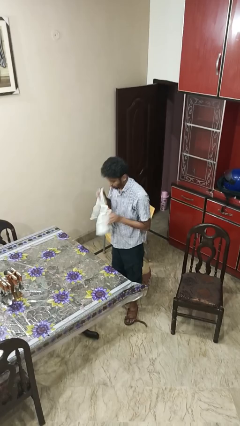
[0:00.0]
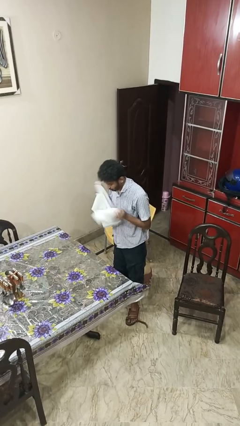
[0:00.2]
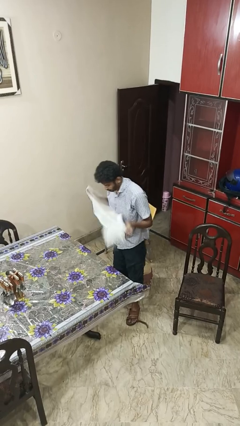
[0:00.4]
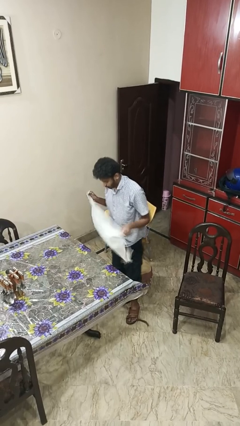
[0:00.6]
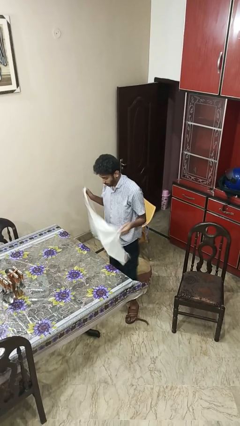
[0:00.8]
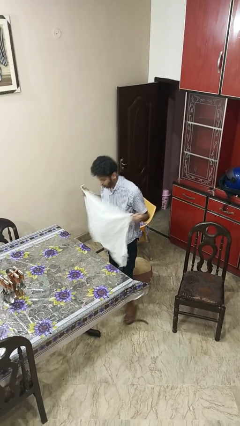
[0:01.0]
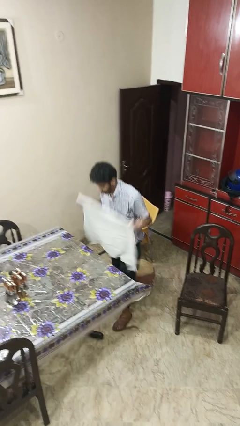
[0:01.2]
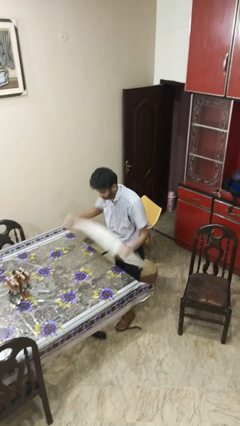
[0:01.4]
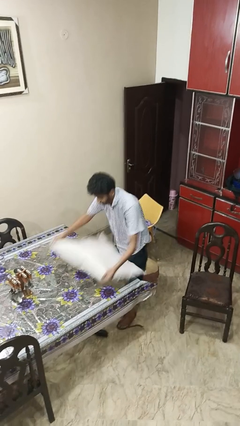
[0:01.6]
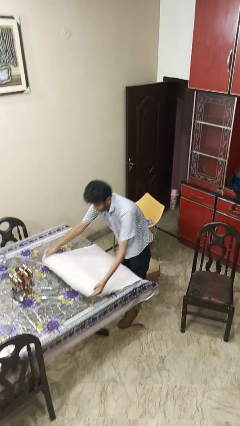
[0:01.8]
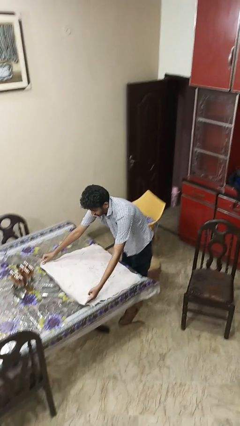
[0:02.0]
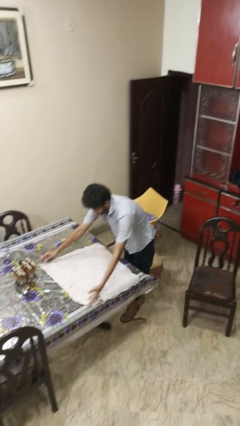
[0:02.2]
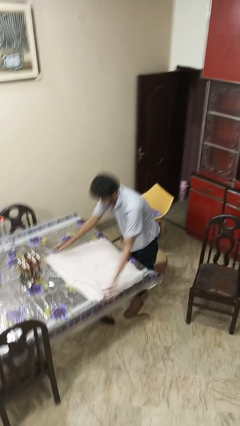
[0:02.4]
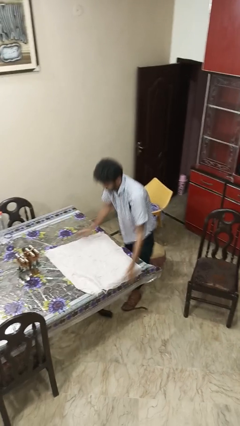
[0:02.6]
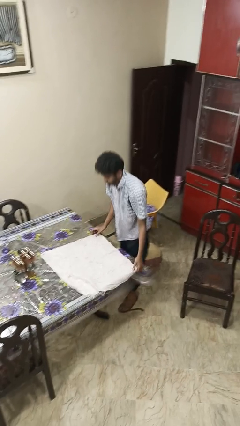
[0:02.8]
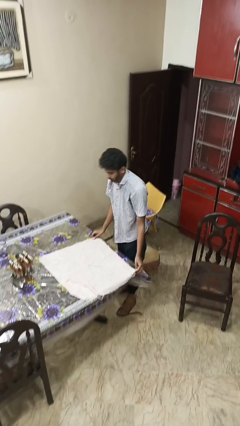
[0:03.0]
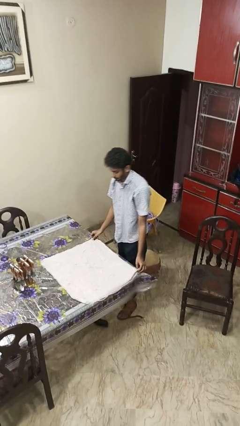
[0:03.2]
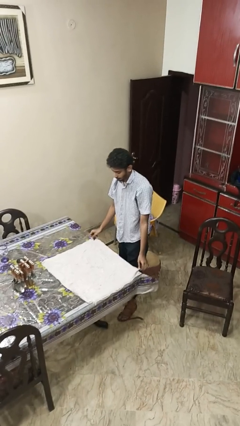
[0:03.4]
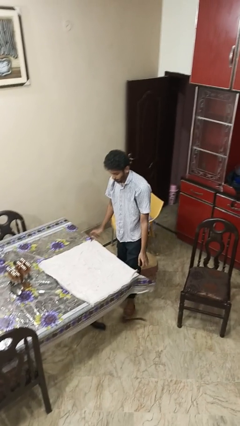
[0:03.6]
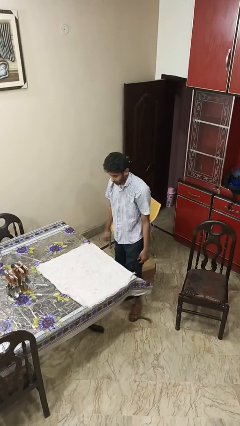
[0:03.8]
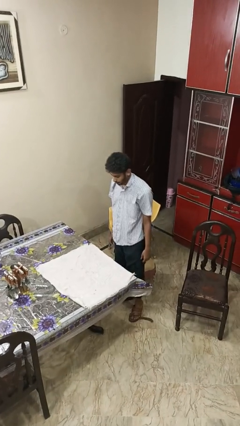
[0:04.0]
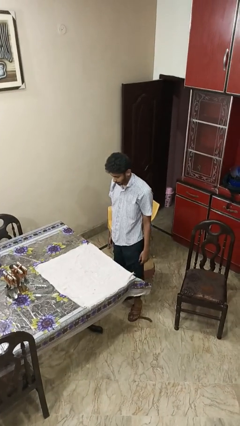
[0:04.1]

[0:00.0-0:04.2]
person spreads tablecloth

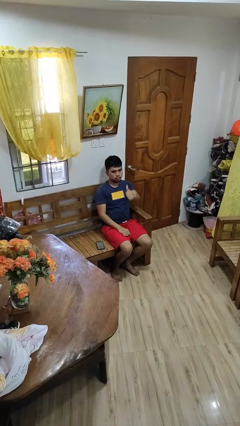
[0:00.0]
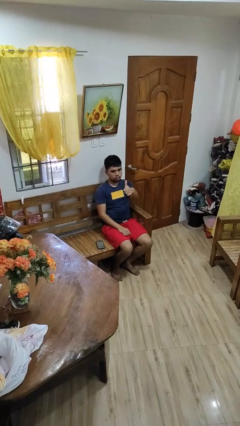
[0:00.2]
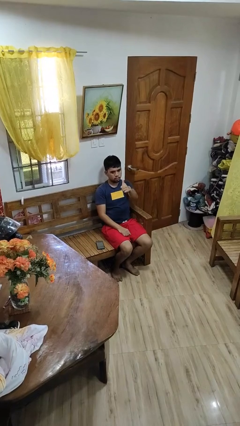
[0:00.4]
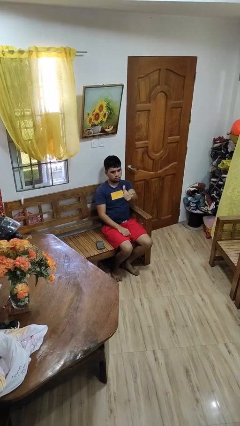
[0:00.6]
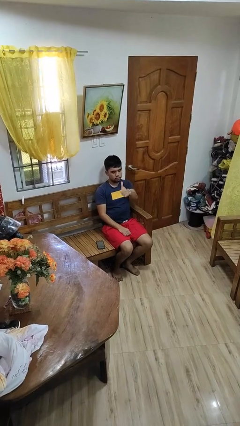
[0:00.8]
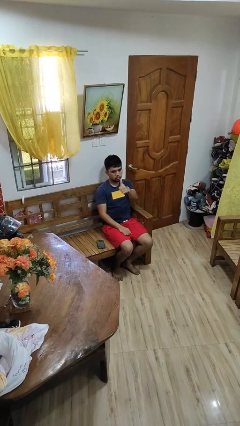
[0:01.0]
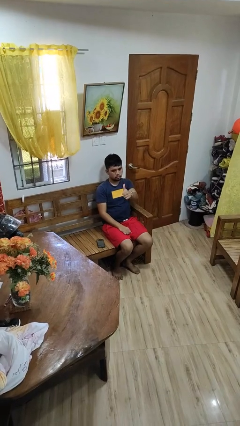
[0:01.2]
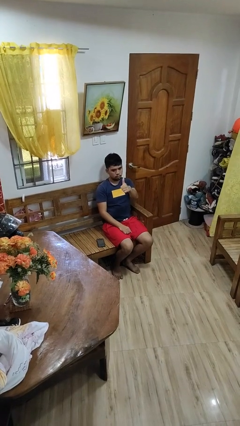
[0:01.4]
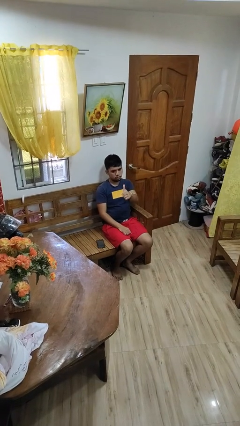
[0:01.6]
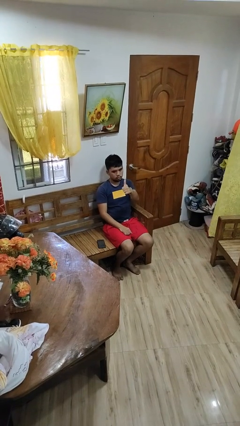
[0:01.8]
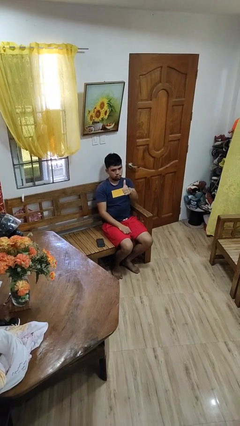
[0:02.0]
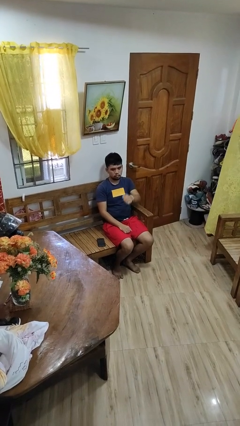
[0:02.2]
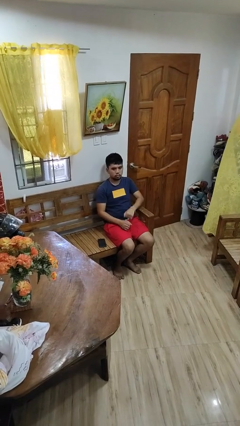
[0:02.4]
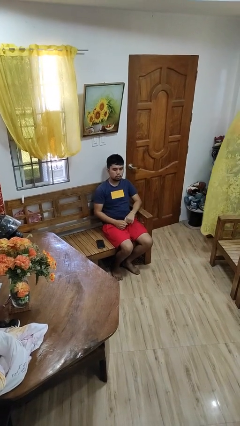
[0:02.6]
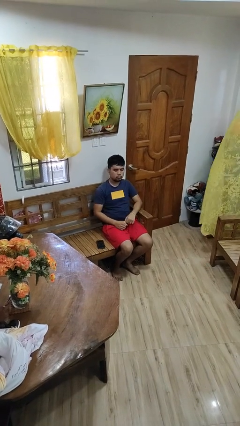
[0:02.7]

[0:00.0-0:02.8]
person gestures thumbs up

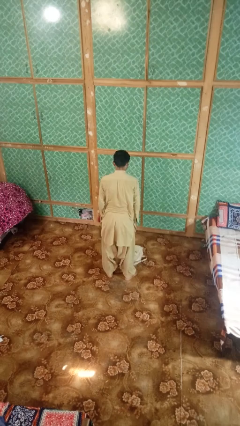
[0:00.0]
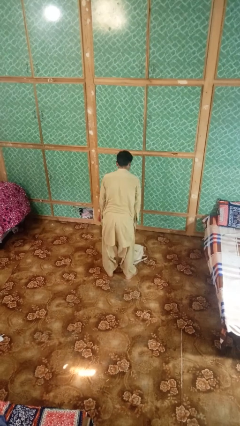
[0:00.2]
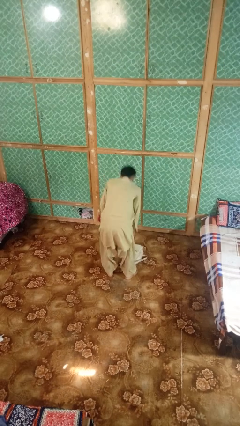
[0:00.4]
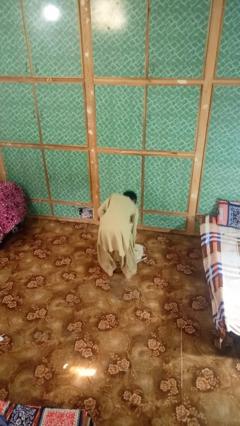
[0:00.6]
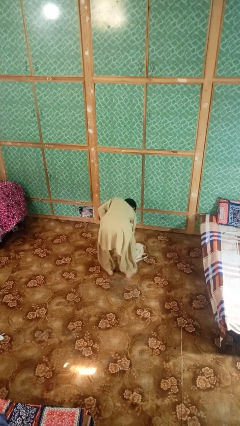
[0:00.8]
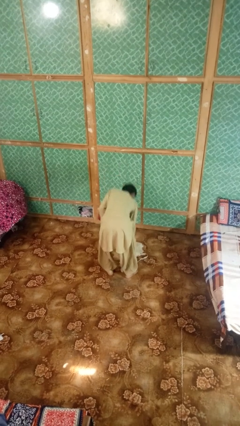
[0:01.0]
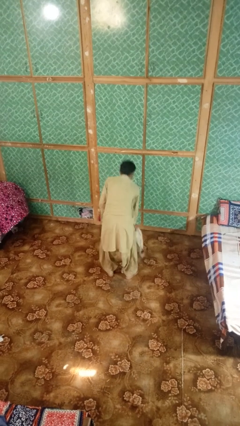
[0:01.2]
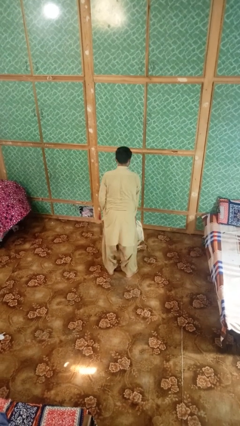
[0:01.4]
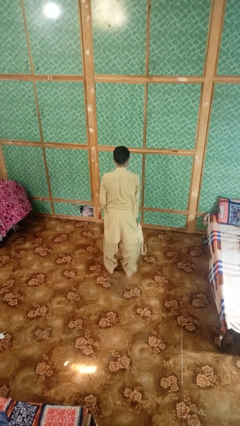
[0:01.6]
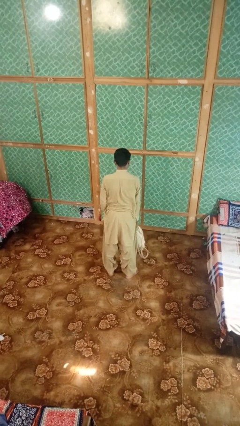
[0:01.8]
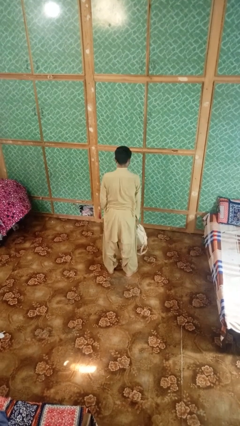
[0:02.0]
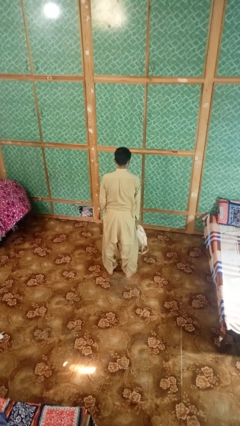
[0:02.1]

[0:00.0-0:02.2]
person picks up object from floor

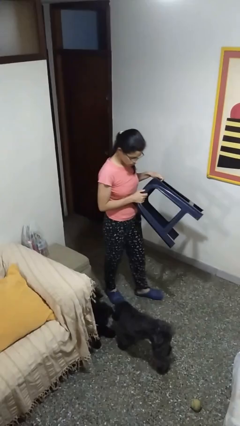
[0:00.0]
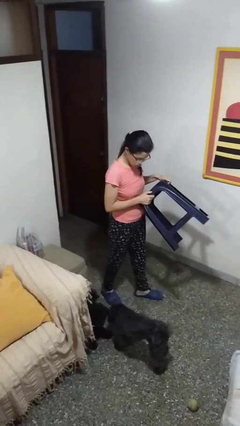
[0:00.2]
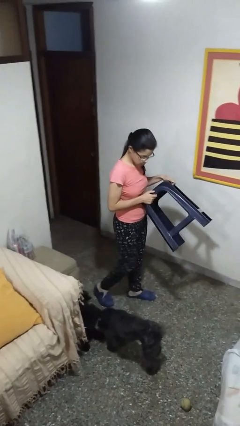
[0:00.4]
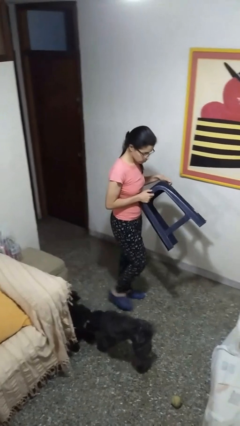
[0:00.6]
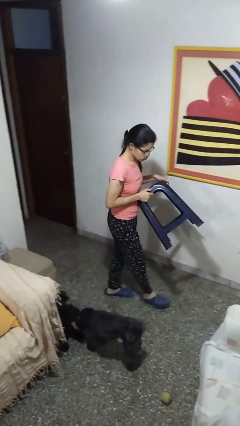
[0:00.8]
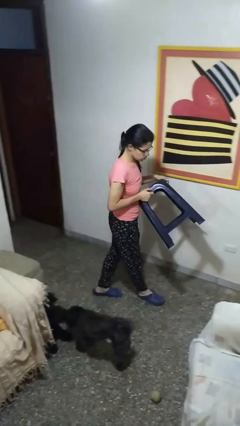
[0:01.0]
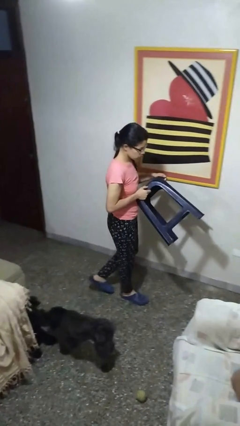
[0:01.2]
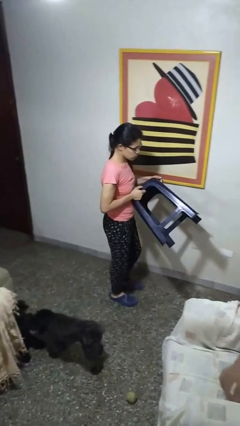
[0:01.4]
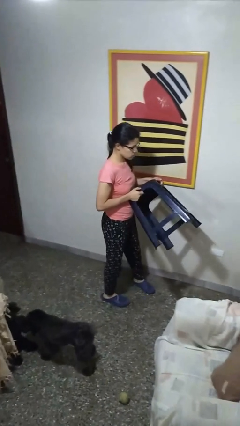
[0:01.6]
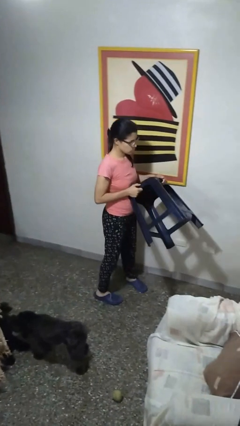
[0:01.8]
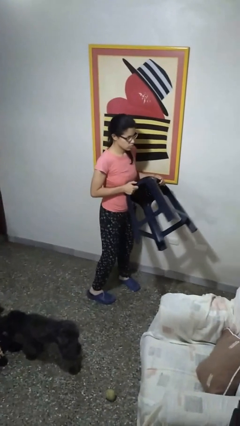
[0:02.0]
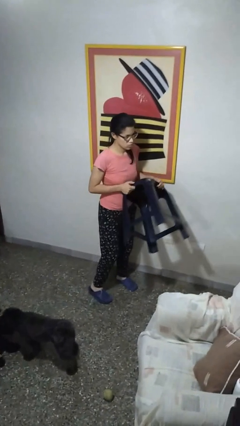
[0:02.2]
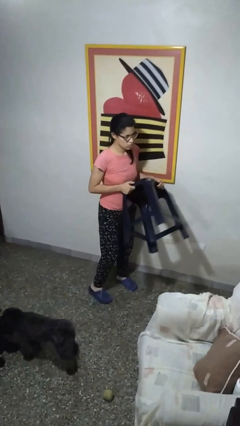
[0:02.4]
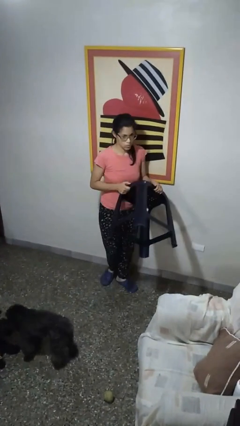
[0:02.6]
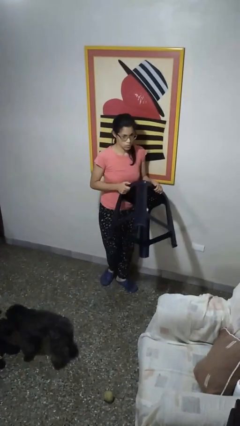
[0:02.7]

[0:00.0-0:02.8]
person carries furniture

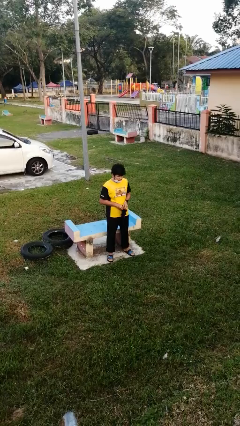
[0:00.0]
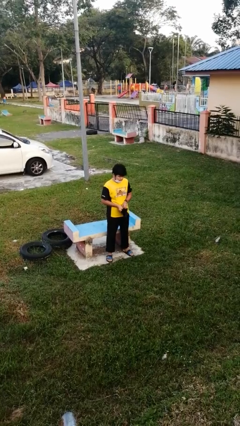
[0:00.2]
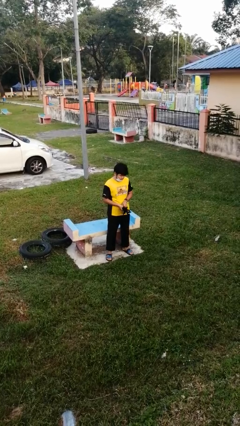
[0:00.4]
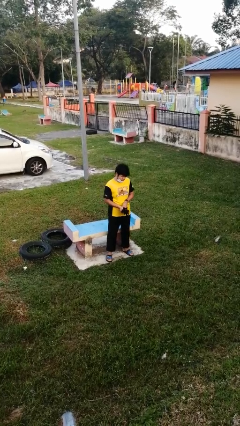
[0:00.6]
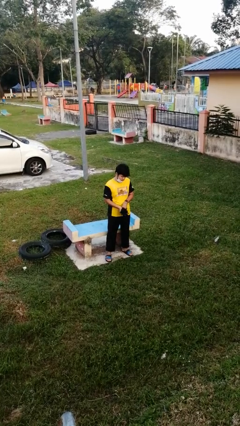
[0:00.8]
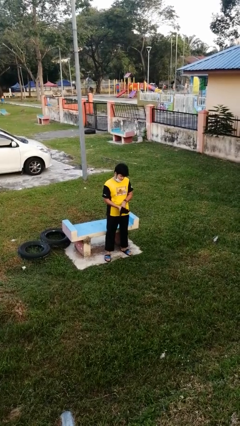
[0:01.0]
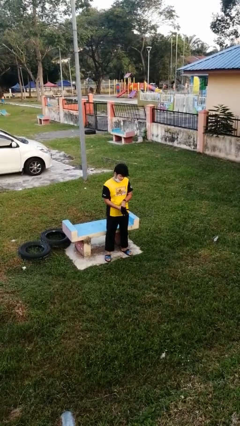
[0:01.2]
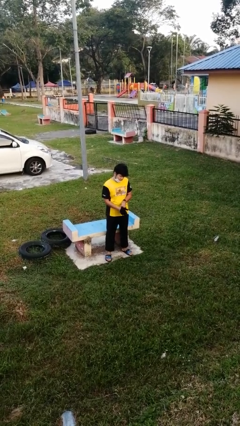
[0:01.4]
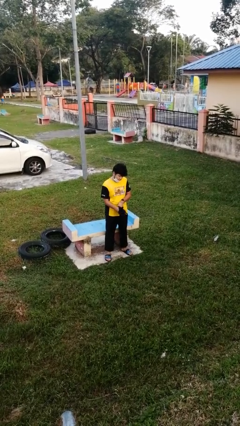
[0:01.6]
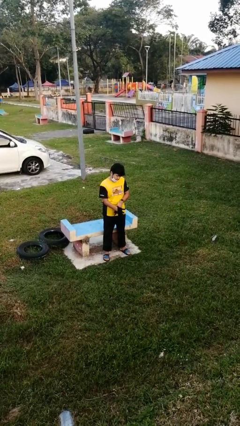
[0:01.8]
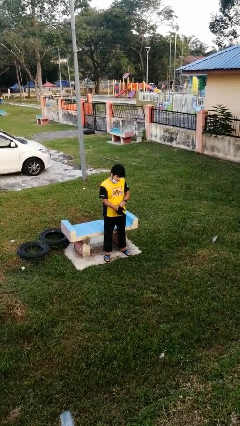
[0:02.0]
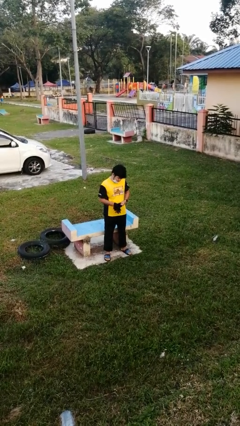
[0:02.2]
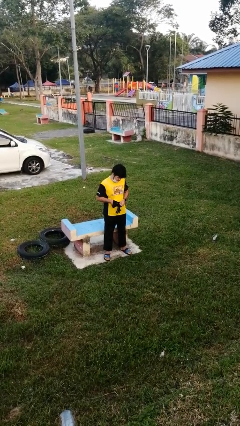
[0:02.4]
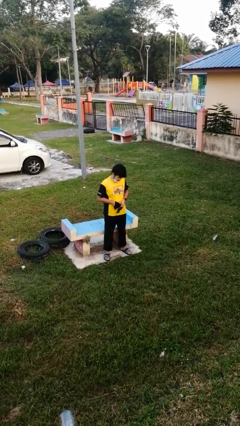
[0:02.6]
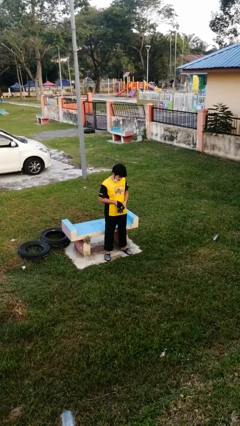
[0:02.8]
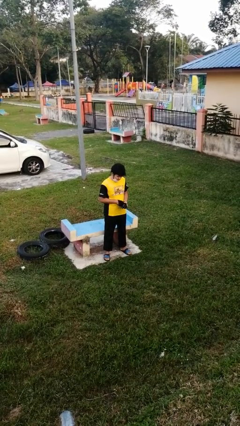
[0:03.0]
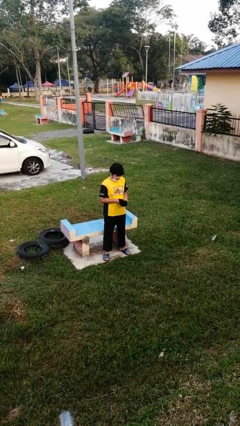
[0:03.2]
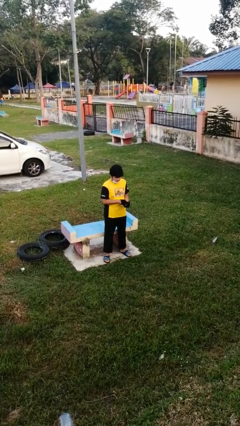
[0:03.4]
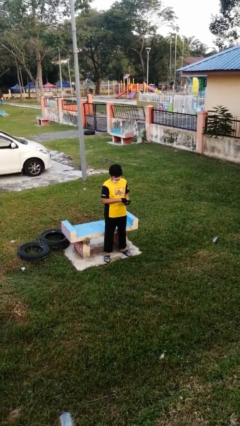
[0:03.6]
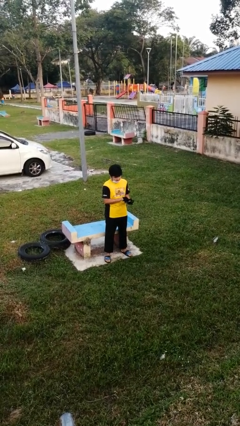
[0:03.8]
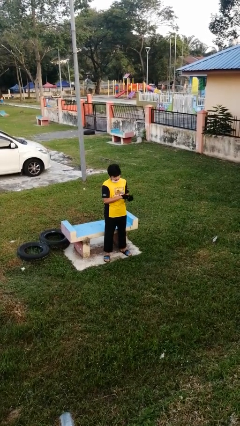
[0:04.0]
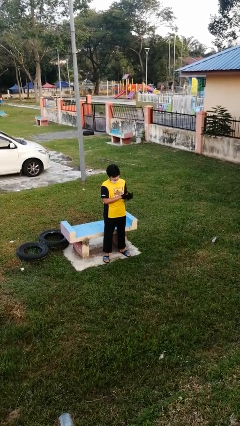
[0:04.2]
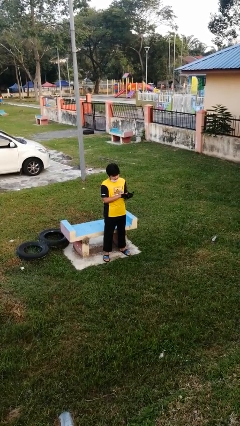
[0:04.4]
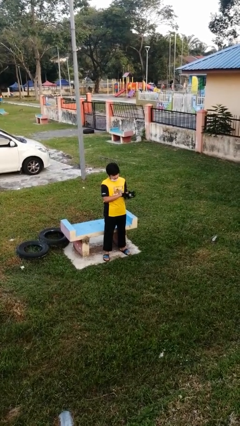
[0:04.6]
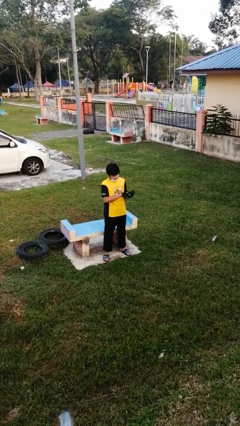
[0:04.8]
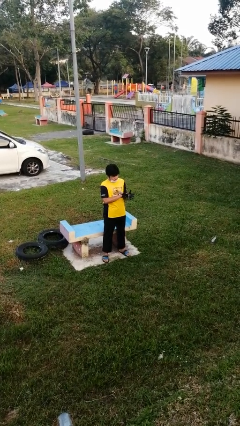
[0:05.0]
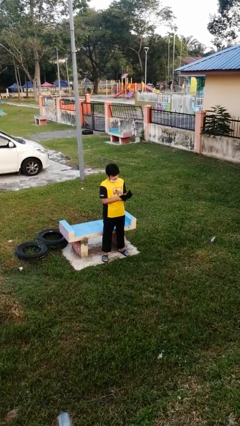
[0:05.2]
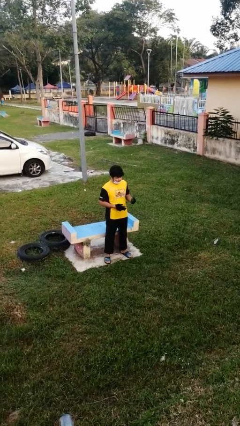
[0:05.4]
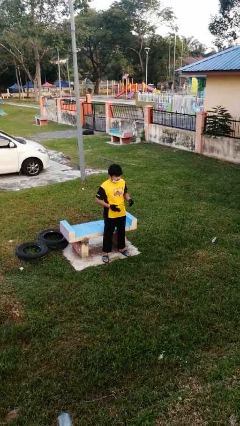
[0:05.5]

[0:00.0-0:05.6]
person puts on gloves
